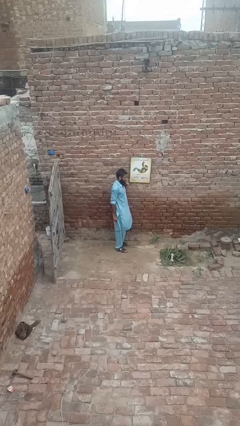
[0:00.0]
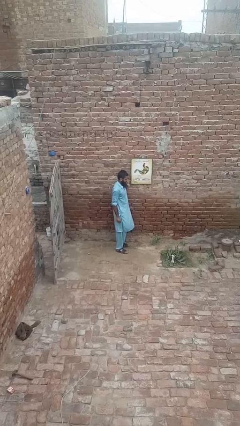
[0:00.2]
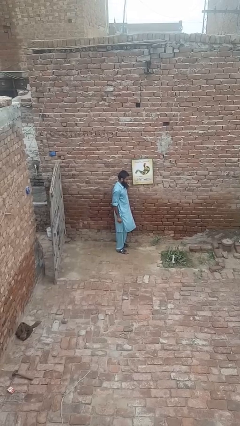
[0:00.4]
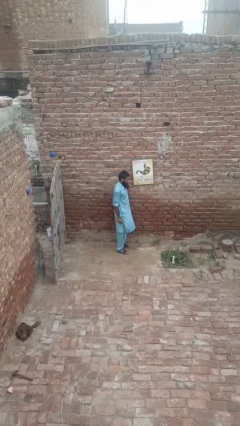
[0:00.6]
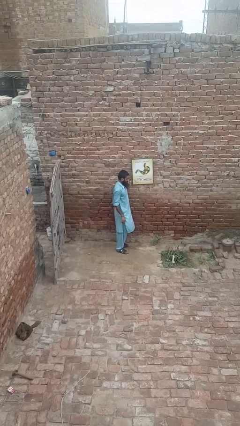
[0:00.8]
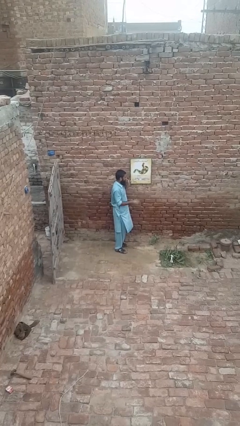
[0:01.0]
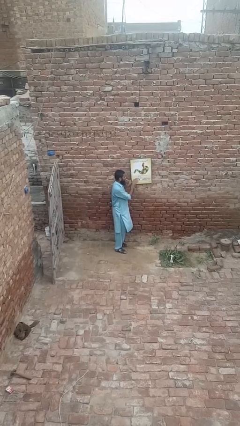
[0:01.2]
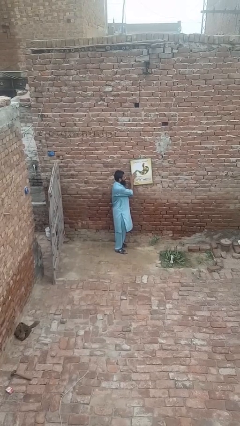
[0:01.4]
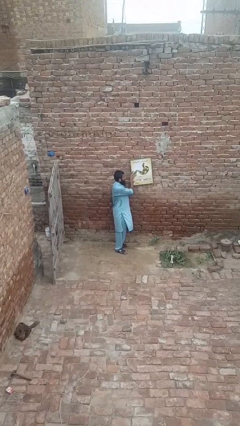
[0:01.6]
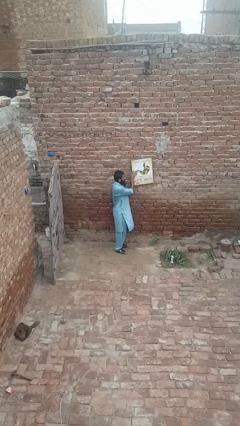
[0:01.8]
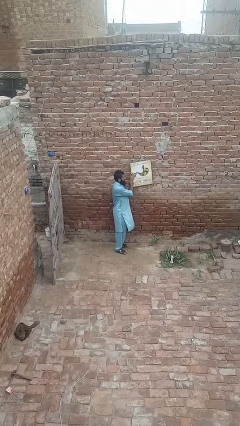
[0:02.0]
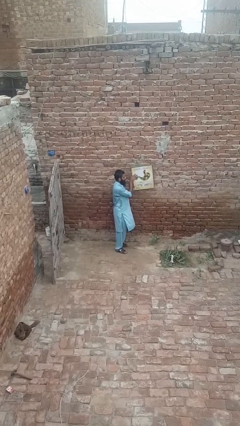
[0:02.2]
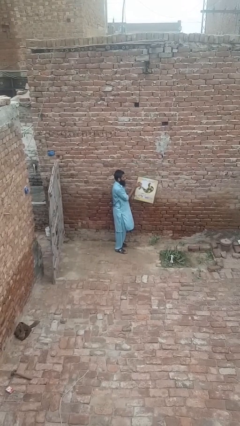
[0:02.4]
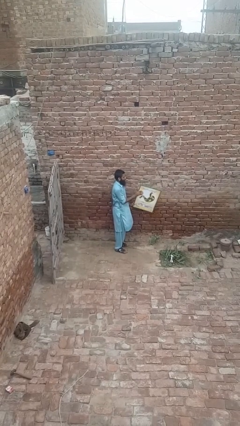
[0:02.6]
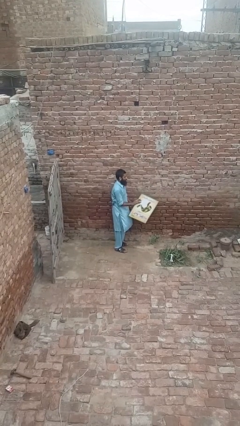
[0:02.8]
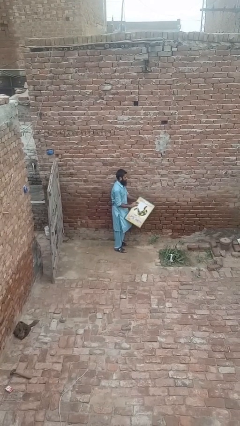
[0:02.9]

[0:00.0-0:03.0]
person takes down picture frame

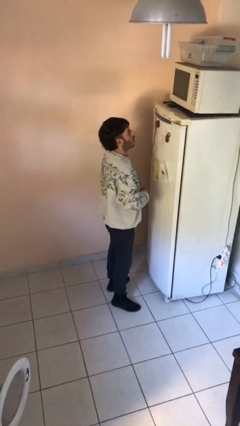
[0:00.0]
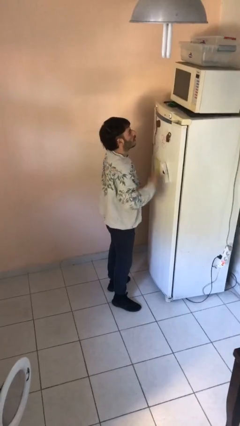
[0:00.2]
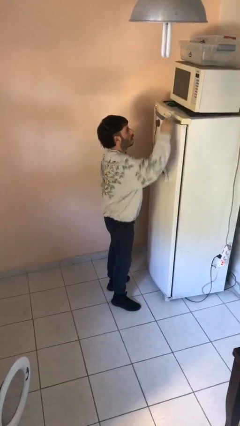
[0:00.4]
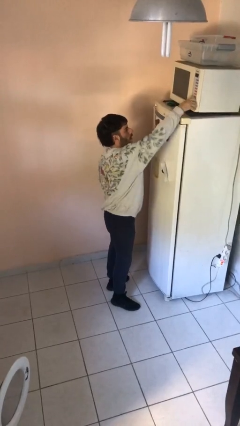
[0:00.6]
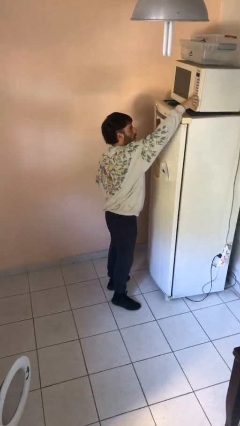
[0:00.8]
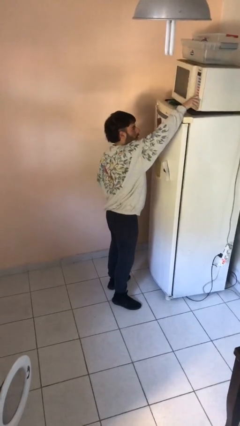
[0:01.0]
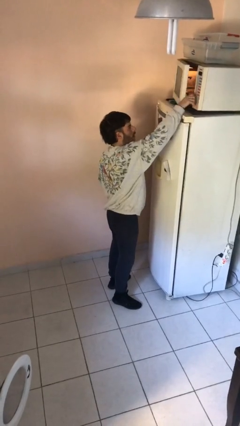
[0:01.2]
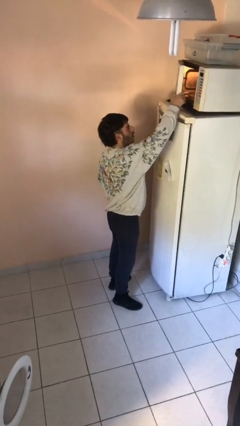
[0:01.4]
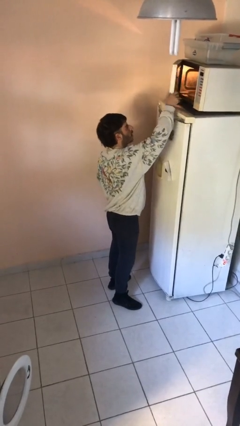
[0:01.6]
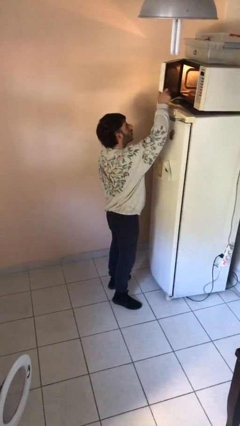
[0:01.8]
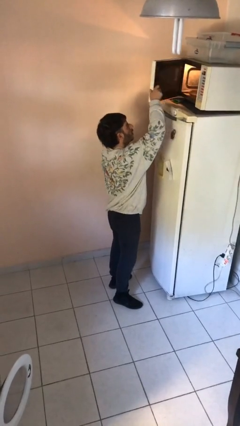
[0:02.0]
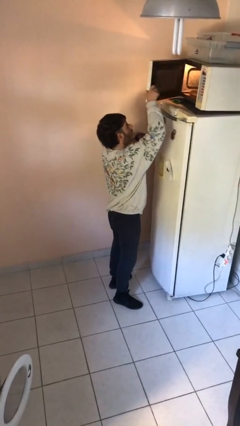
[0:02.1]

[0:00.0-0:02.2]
person opens microwave

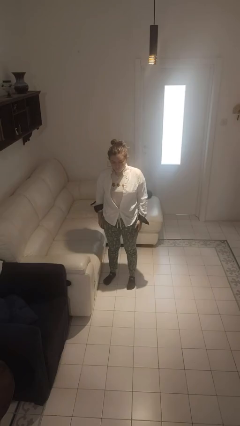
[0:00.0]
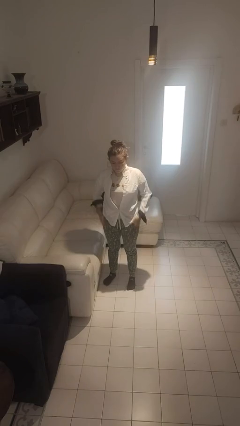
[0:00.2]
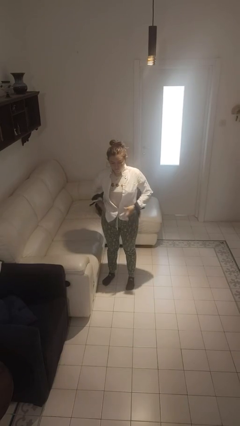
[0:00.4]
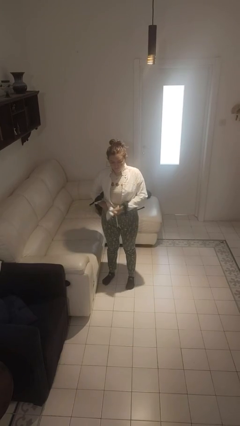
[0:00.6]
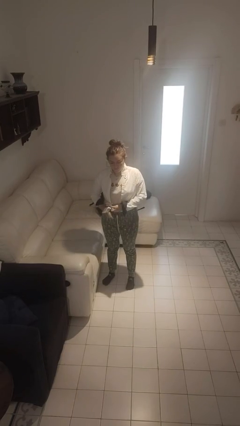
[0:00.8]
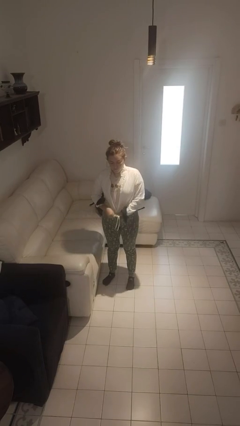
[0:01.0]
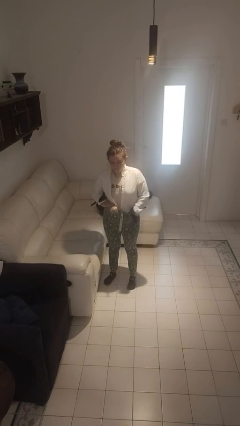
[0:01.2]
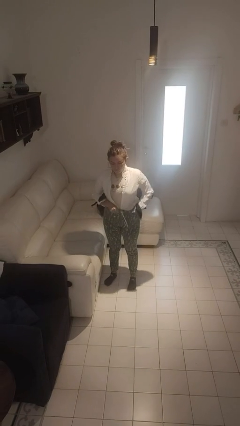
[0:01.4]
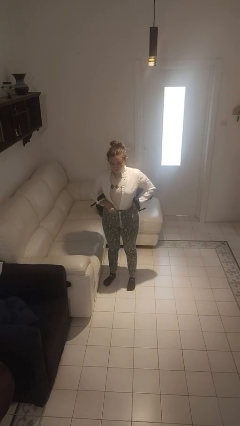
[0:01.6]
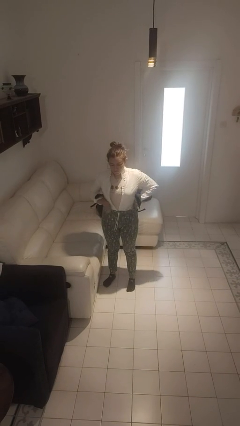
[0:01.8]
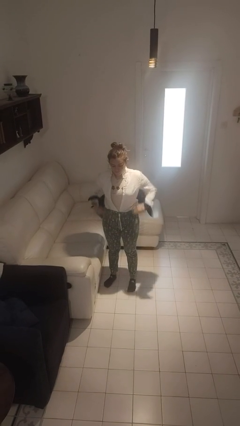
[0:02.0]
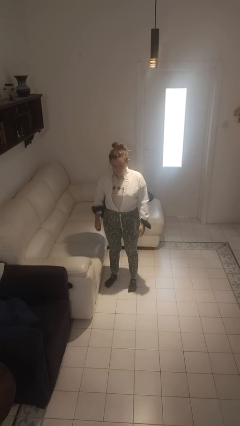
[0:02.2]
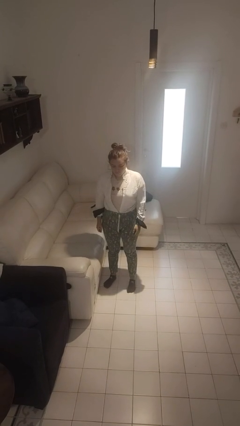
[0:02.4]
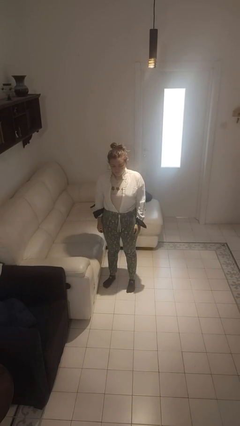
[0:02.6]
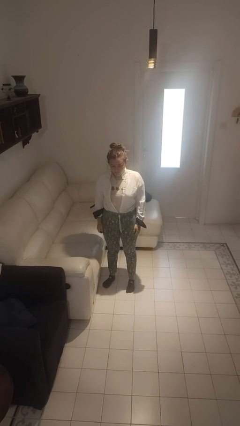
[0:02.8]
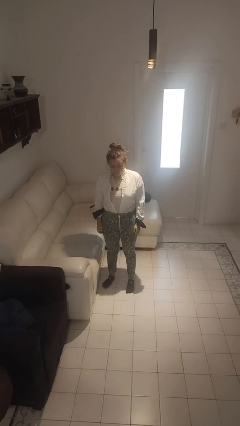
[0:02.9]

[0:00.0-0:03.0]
person tucks in shirt

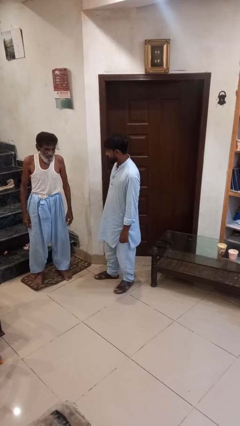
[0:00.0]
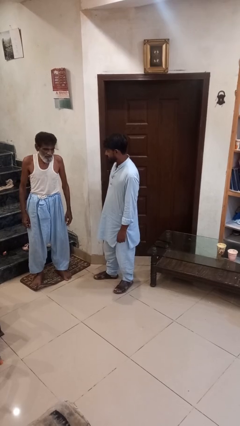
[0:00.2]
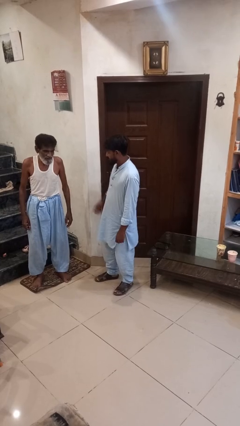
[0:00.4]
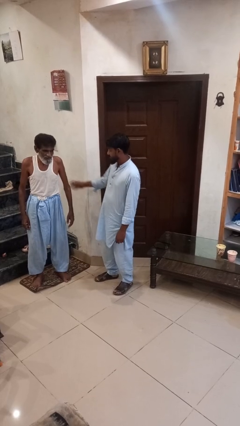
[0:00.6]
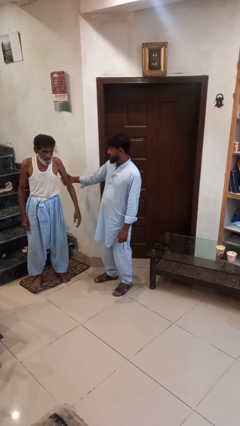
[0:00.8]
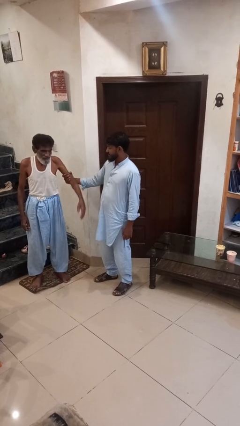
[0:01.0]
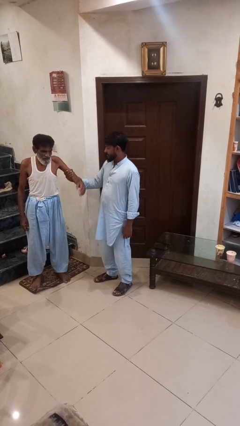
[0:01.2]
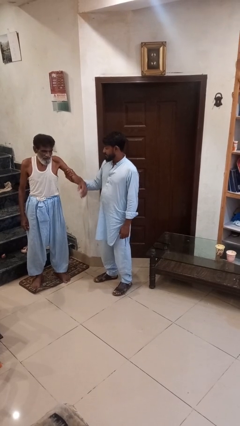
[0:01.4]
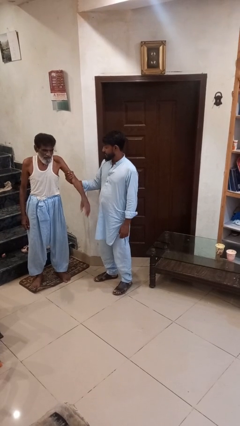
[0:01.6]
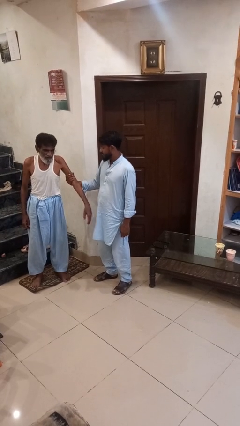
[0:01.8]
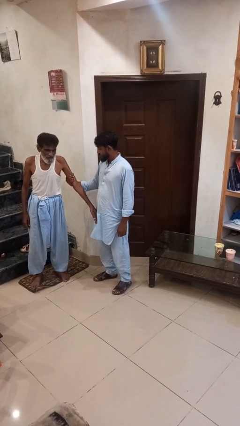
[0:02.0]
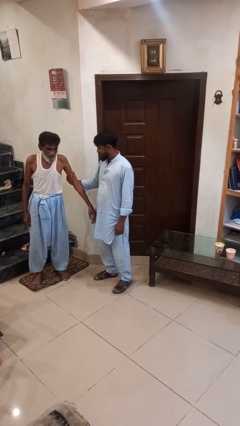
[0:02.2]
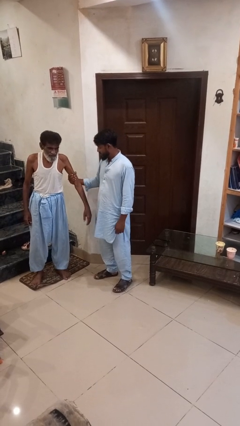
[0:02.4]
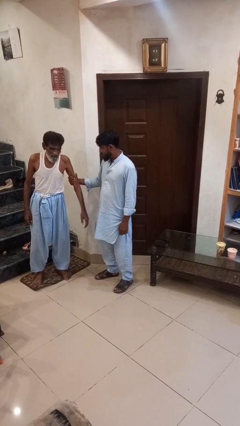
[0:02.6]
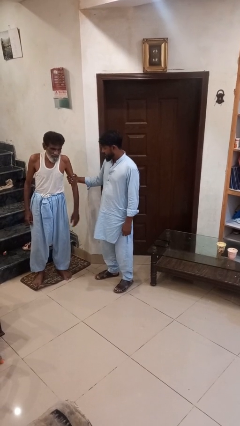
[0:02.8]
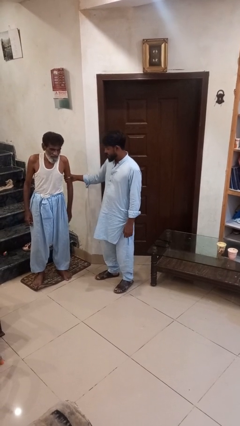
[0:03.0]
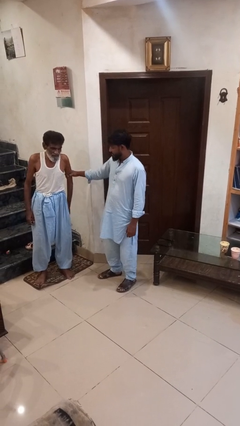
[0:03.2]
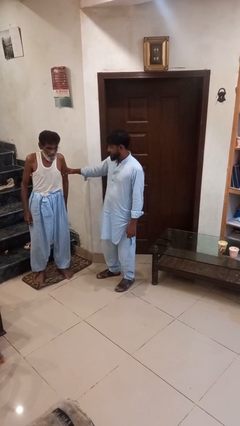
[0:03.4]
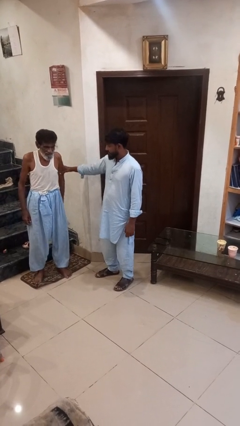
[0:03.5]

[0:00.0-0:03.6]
person grabs person by bicep

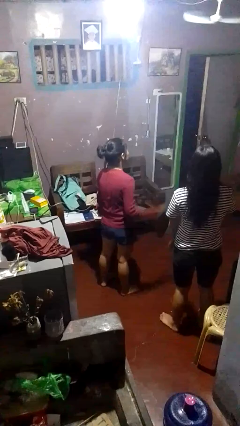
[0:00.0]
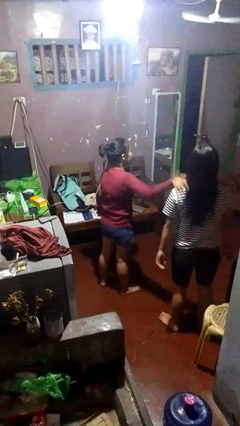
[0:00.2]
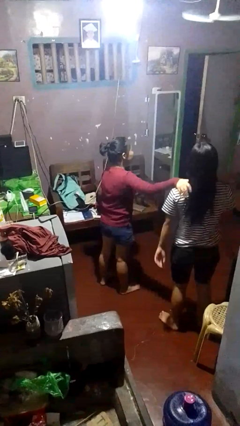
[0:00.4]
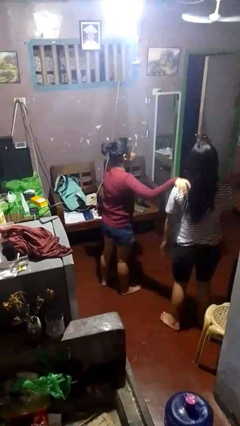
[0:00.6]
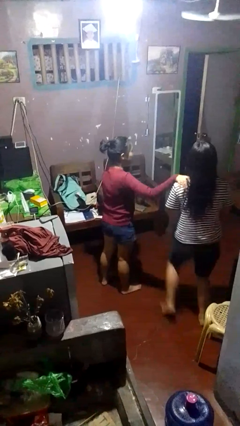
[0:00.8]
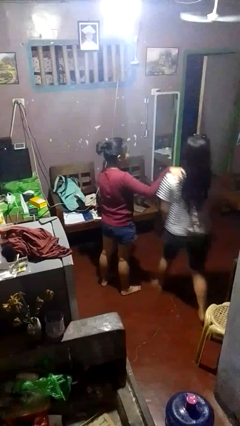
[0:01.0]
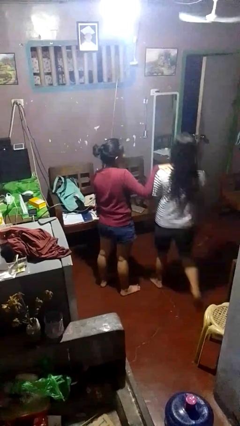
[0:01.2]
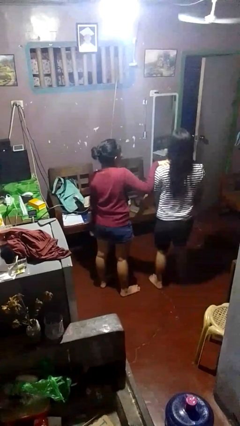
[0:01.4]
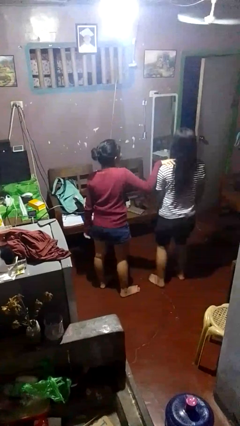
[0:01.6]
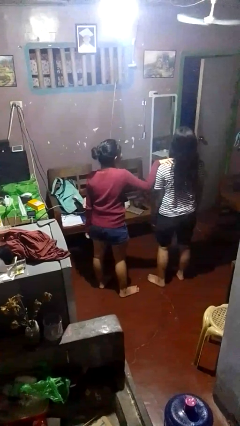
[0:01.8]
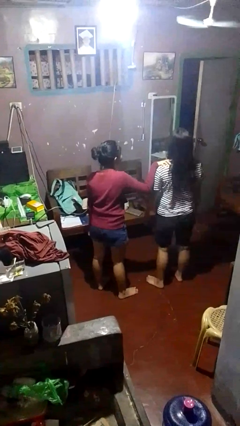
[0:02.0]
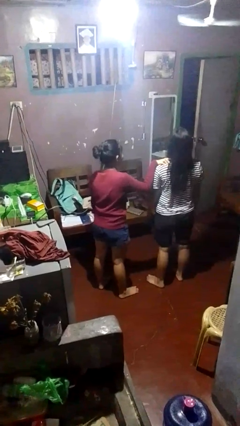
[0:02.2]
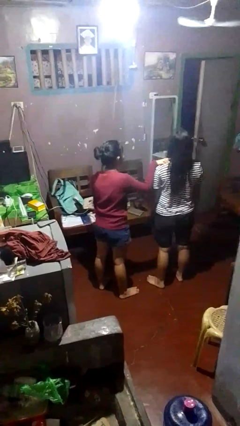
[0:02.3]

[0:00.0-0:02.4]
person grabs person by shoulder

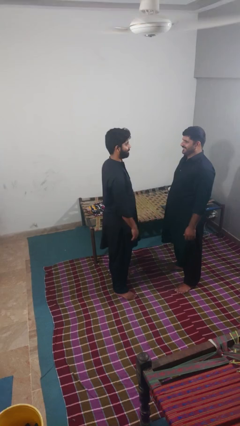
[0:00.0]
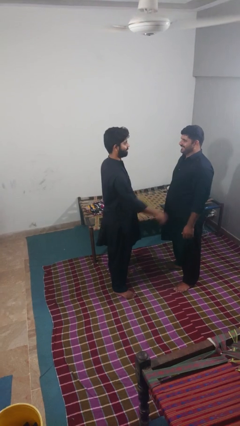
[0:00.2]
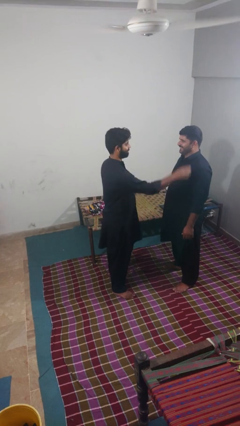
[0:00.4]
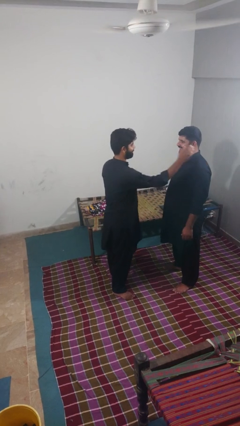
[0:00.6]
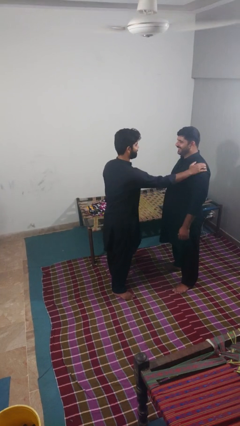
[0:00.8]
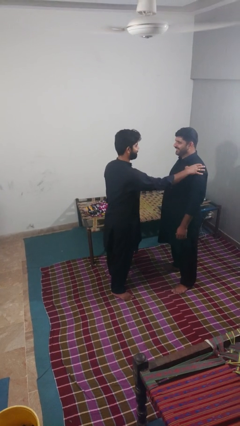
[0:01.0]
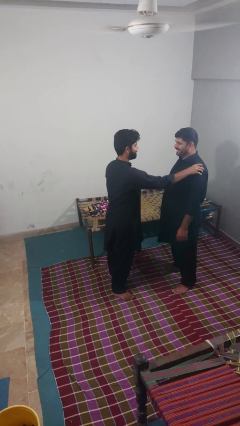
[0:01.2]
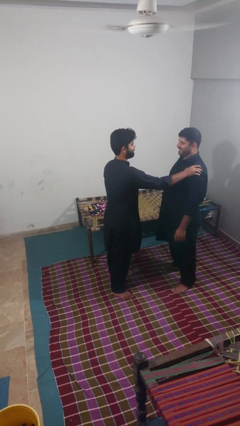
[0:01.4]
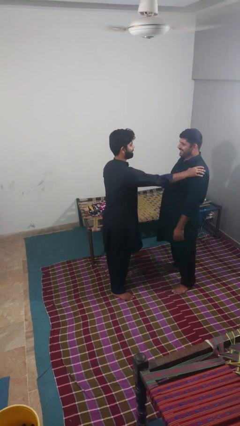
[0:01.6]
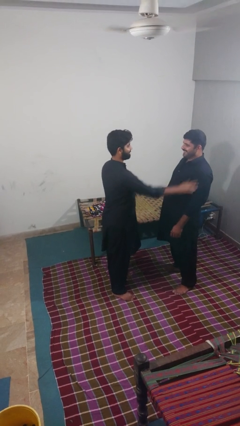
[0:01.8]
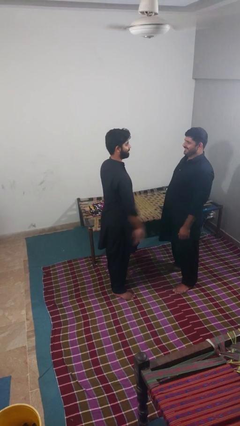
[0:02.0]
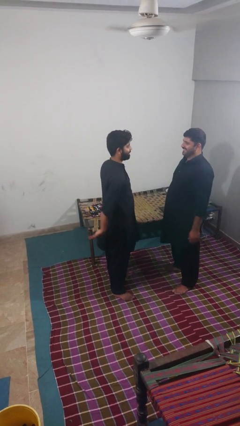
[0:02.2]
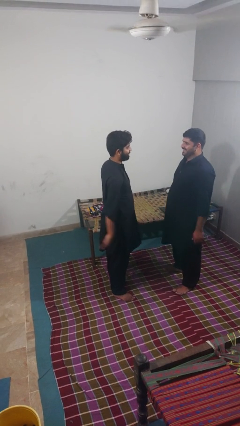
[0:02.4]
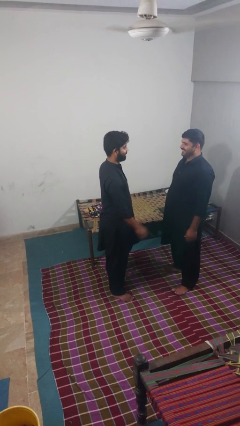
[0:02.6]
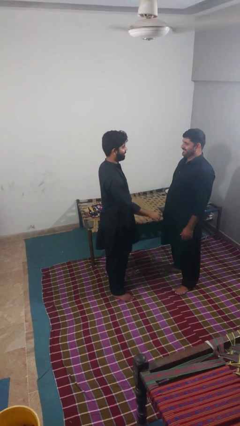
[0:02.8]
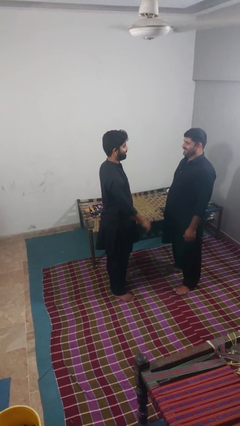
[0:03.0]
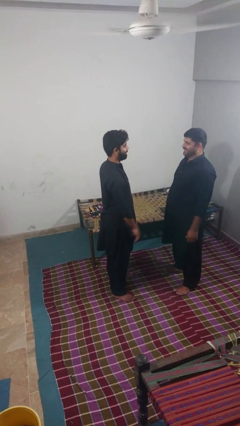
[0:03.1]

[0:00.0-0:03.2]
person pounds shoulders of person

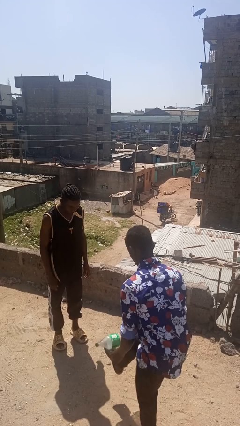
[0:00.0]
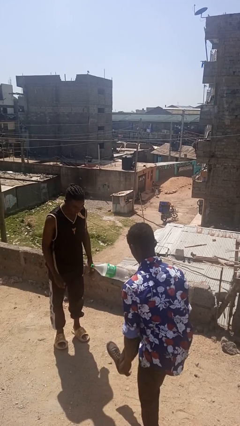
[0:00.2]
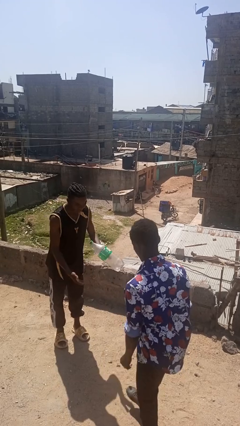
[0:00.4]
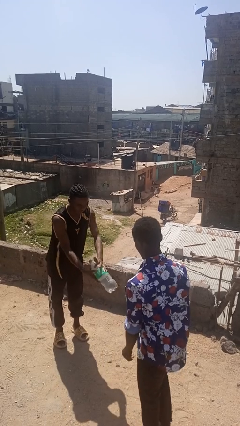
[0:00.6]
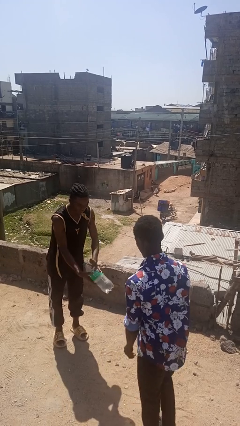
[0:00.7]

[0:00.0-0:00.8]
person kicks object to person
